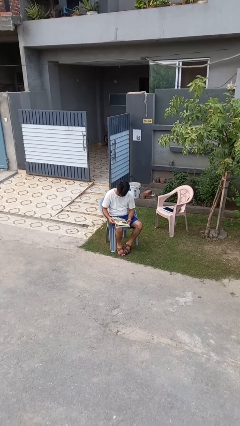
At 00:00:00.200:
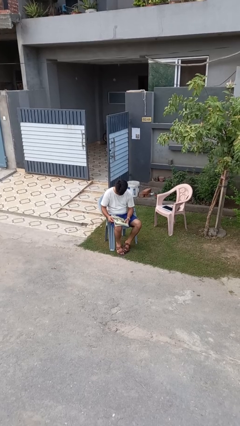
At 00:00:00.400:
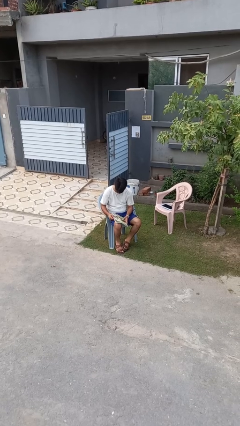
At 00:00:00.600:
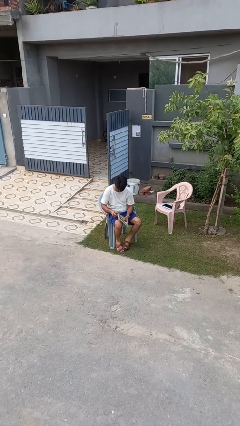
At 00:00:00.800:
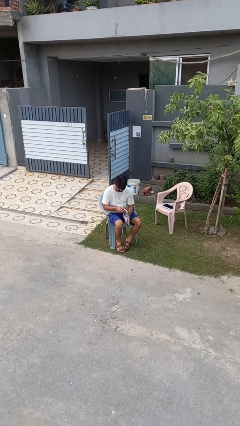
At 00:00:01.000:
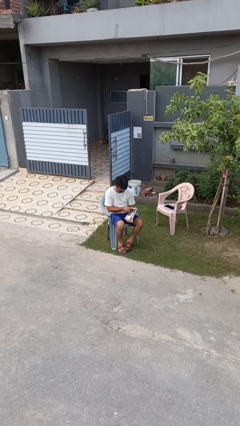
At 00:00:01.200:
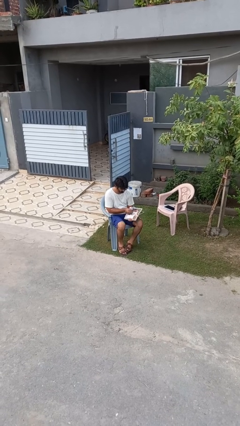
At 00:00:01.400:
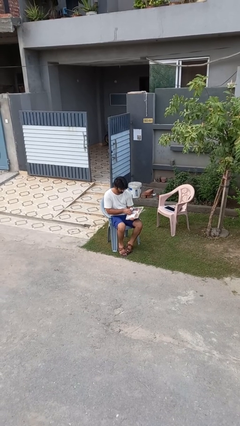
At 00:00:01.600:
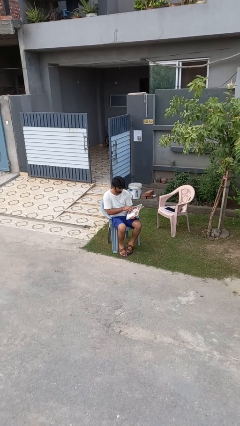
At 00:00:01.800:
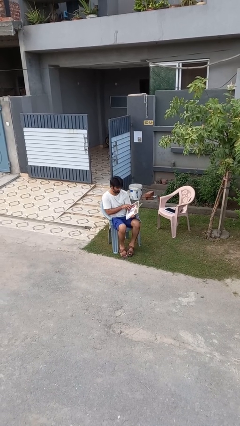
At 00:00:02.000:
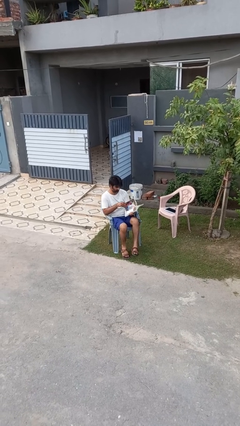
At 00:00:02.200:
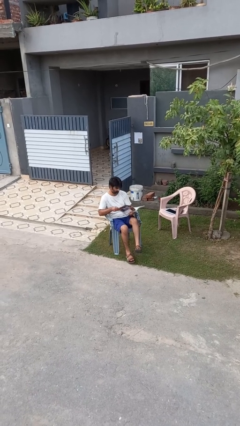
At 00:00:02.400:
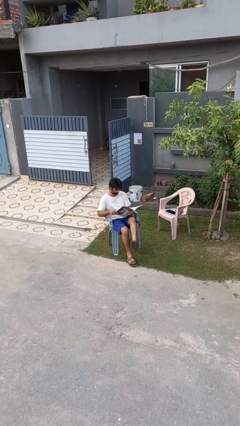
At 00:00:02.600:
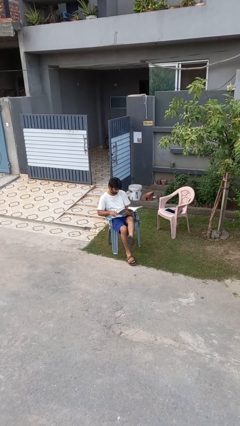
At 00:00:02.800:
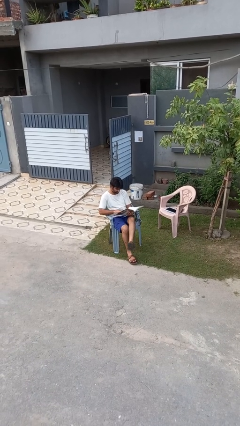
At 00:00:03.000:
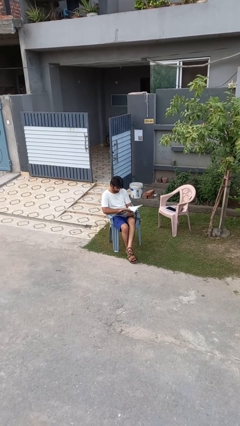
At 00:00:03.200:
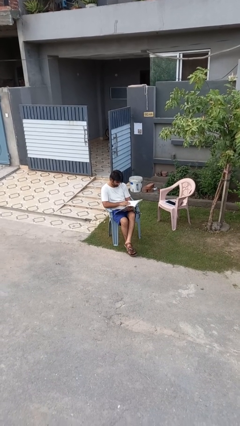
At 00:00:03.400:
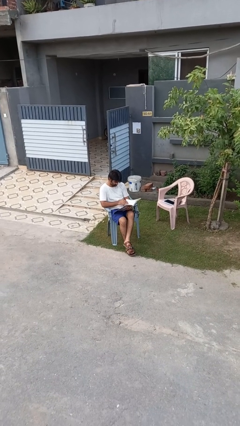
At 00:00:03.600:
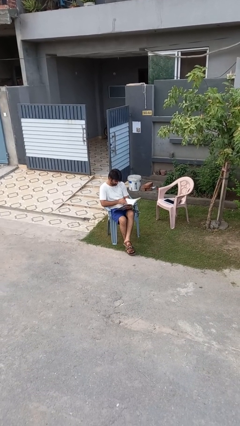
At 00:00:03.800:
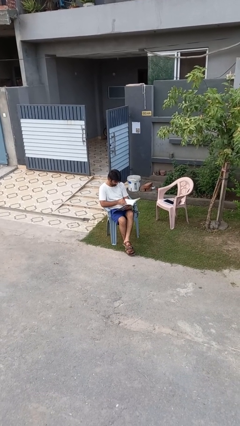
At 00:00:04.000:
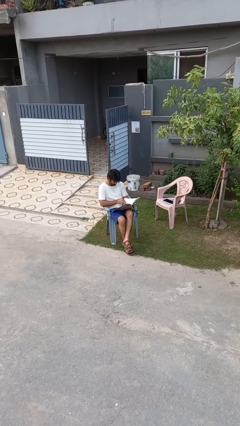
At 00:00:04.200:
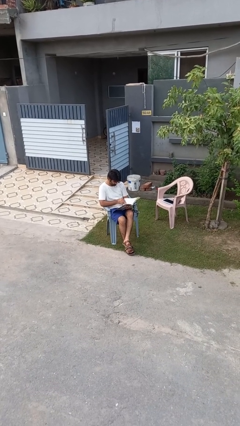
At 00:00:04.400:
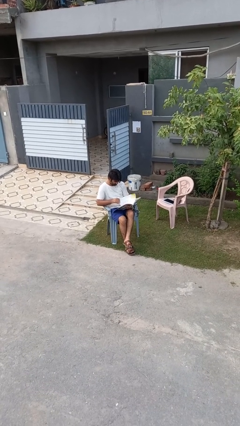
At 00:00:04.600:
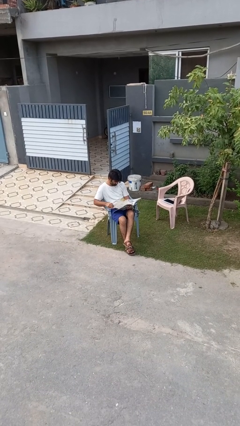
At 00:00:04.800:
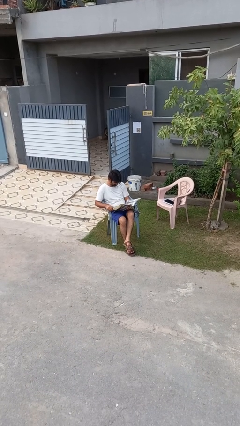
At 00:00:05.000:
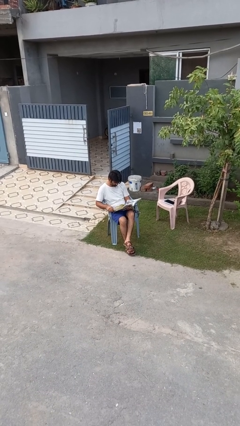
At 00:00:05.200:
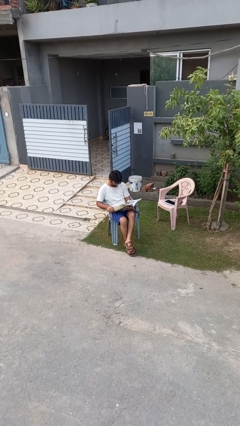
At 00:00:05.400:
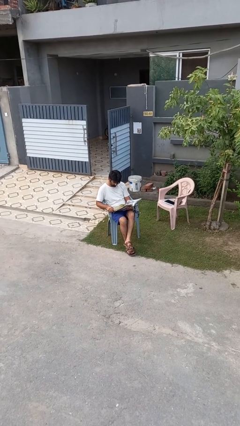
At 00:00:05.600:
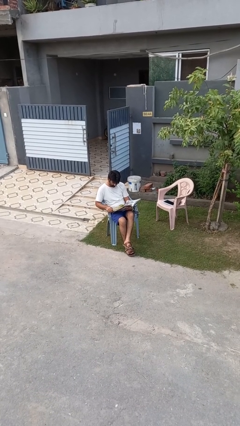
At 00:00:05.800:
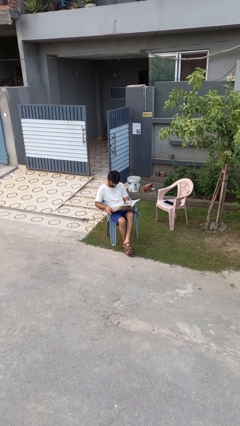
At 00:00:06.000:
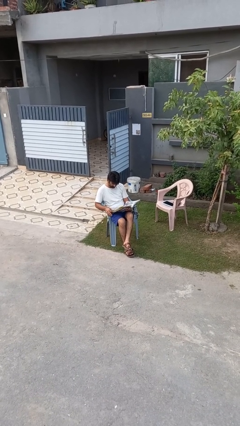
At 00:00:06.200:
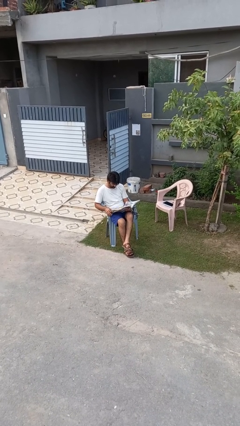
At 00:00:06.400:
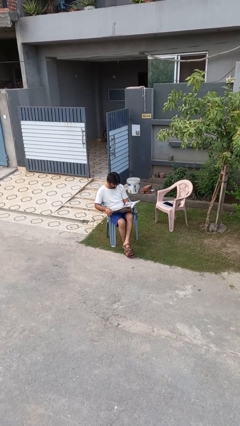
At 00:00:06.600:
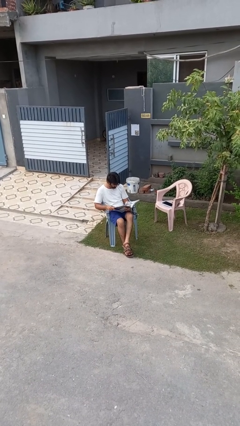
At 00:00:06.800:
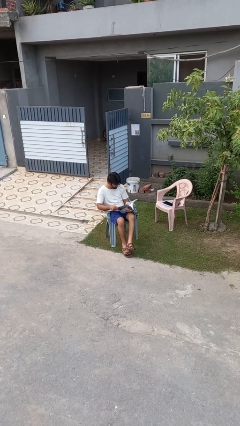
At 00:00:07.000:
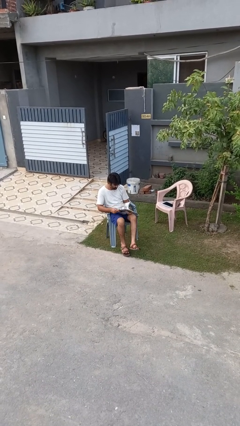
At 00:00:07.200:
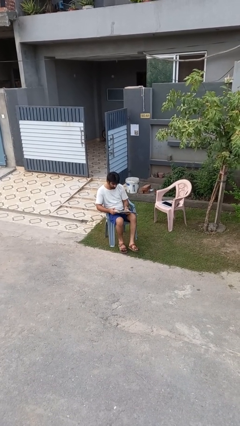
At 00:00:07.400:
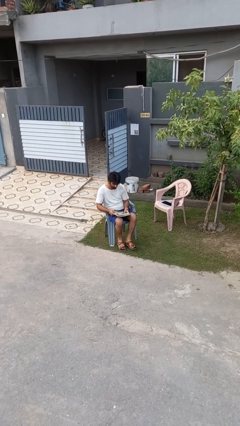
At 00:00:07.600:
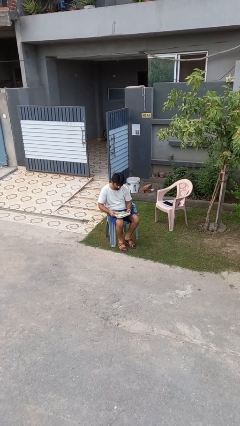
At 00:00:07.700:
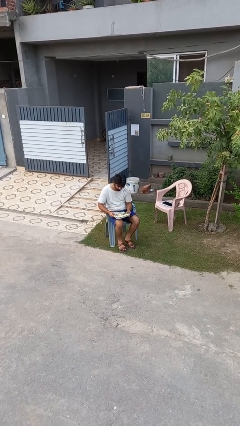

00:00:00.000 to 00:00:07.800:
person reads magazine

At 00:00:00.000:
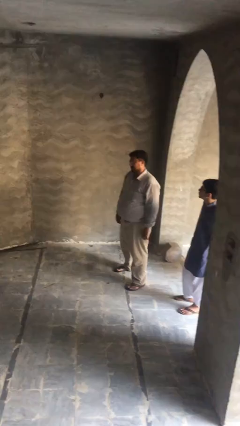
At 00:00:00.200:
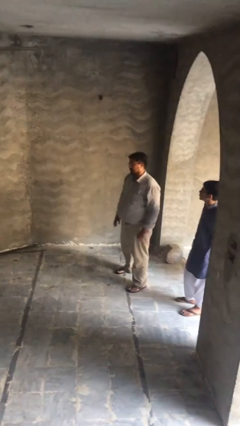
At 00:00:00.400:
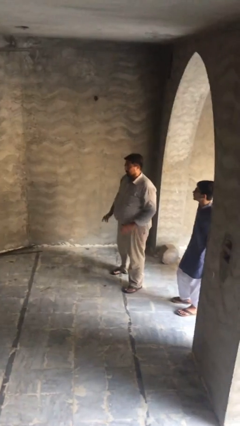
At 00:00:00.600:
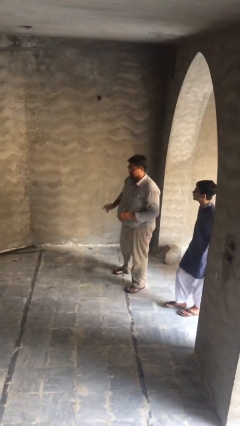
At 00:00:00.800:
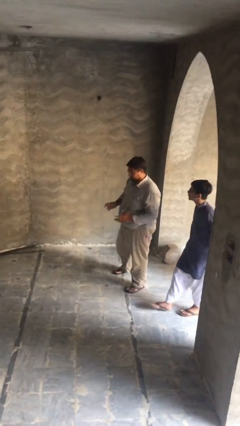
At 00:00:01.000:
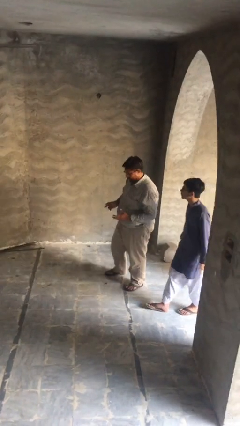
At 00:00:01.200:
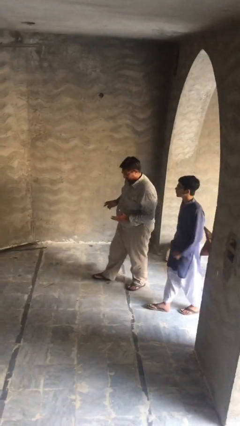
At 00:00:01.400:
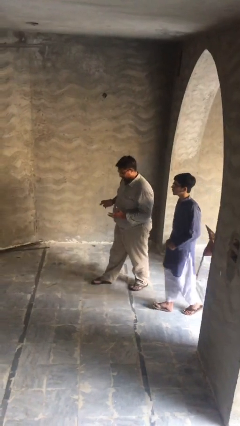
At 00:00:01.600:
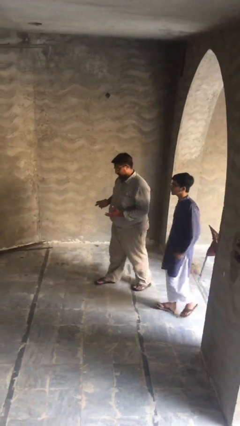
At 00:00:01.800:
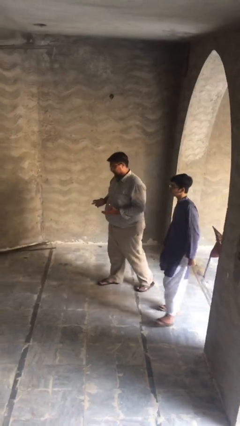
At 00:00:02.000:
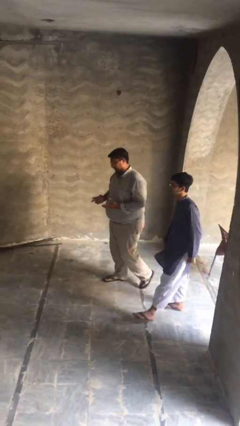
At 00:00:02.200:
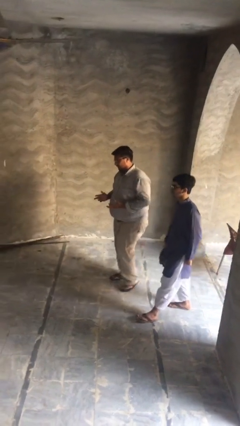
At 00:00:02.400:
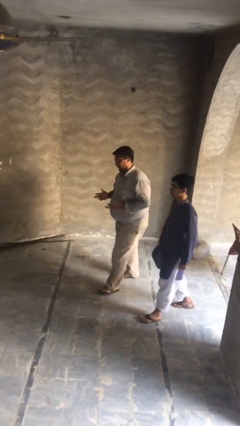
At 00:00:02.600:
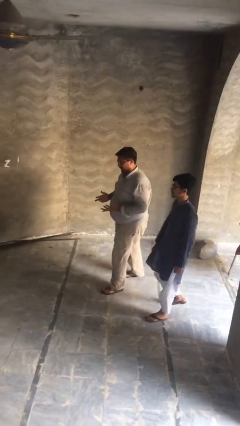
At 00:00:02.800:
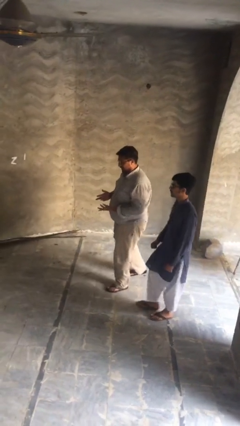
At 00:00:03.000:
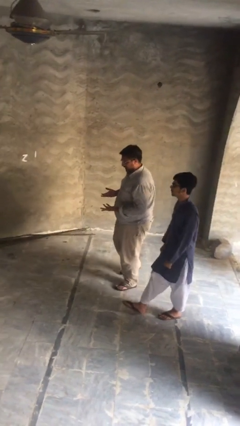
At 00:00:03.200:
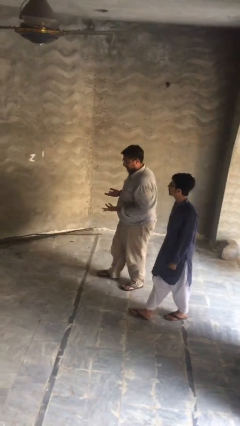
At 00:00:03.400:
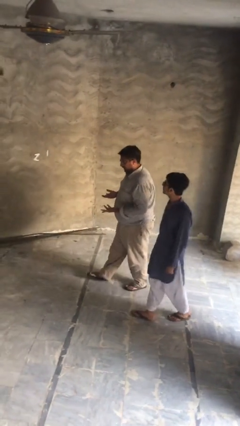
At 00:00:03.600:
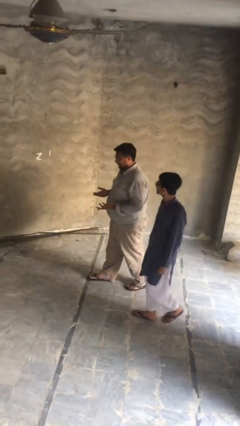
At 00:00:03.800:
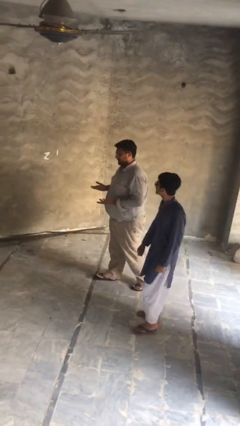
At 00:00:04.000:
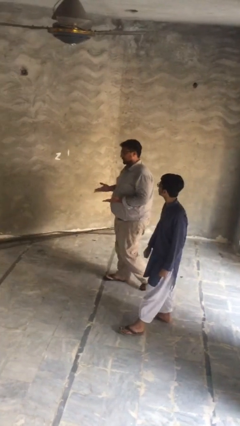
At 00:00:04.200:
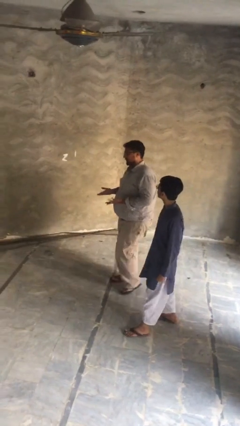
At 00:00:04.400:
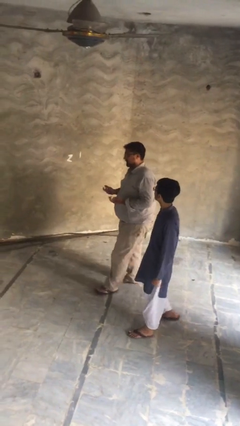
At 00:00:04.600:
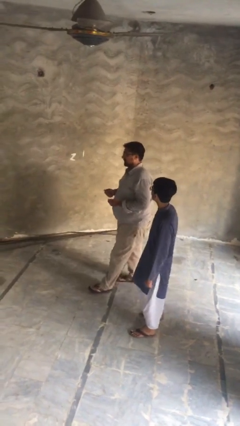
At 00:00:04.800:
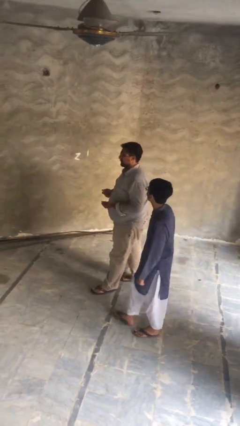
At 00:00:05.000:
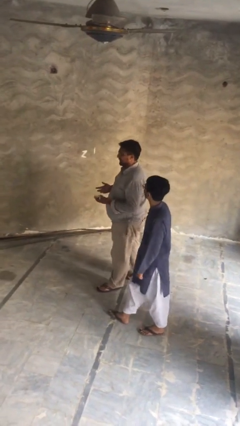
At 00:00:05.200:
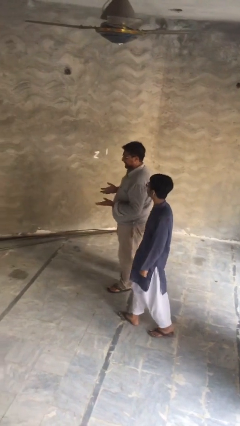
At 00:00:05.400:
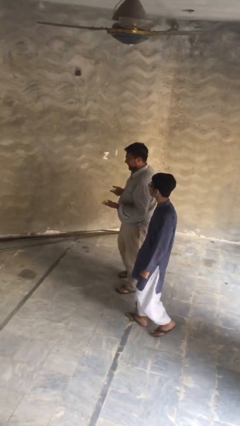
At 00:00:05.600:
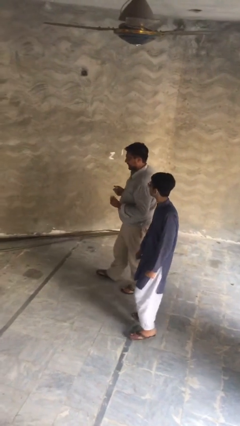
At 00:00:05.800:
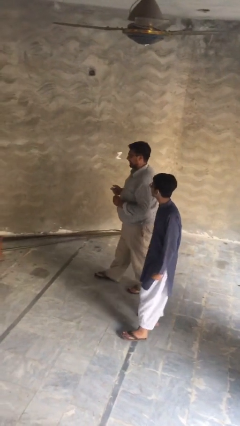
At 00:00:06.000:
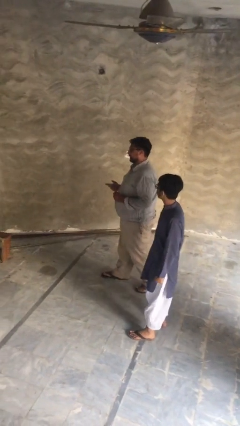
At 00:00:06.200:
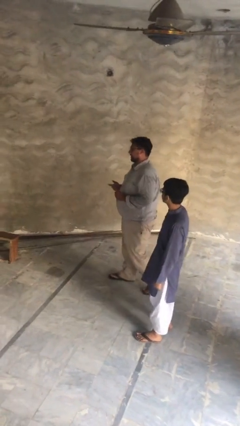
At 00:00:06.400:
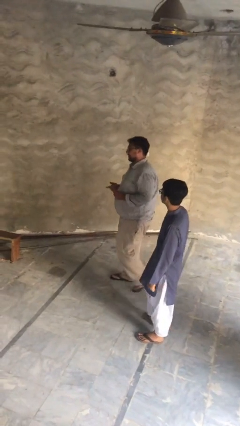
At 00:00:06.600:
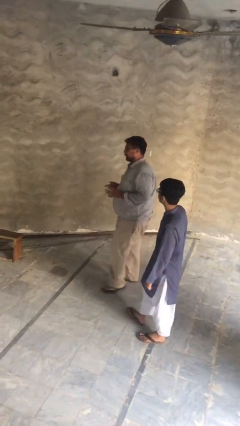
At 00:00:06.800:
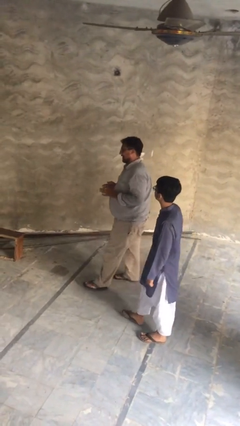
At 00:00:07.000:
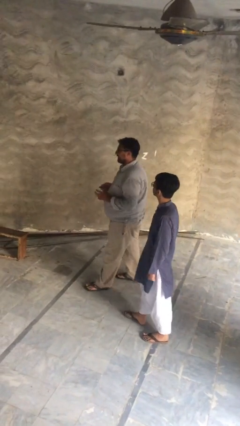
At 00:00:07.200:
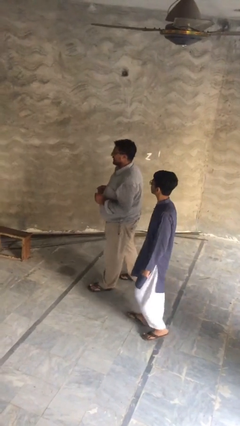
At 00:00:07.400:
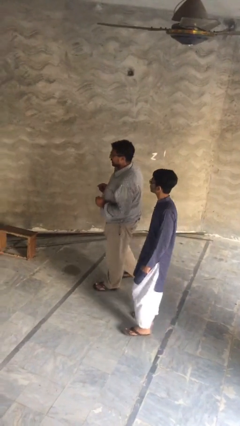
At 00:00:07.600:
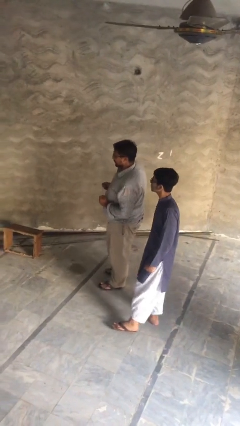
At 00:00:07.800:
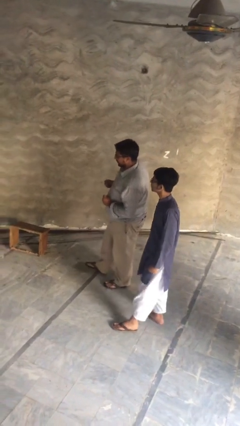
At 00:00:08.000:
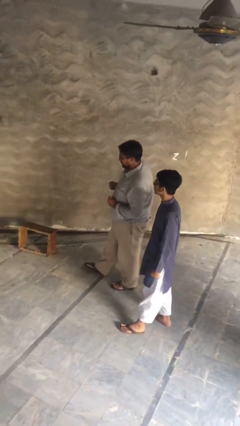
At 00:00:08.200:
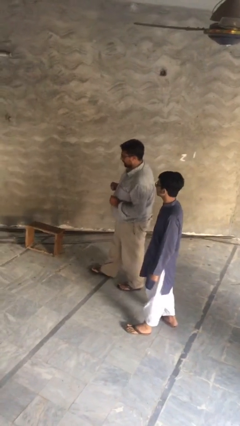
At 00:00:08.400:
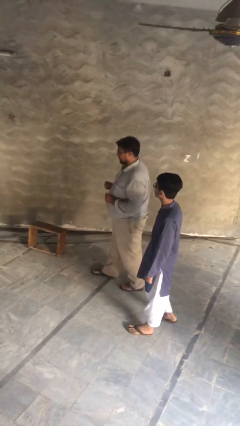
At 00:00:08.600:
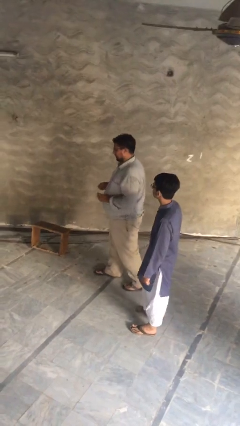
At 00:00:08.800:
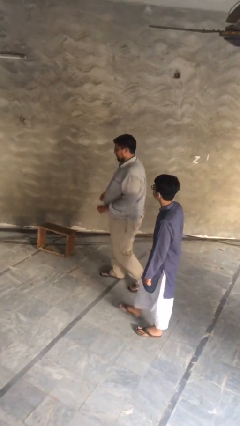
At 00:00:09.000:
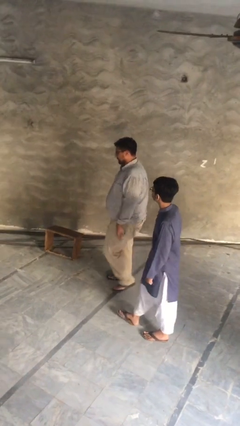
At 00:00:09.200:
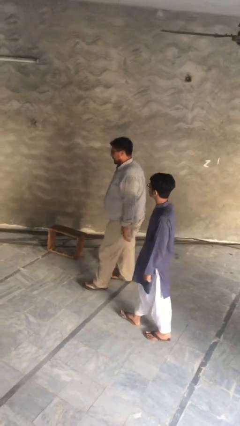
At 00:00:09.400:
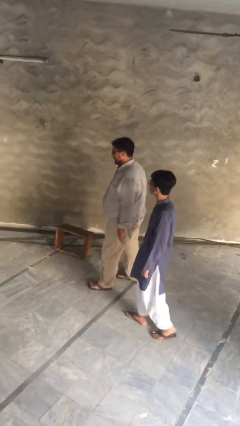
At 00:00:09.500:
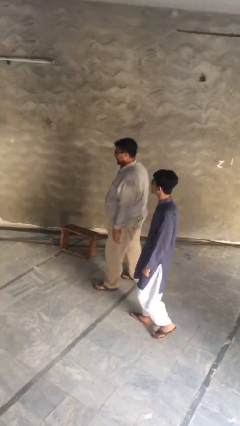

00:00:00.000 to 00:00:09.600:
person talks to person

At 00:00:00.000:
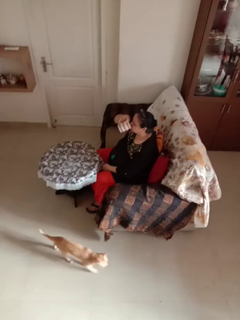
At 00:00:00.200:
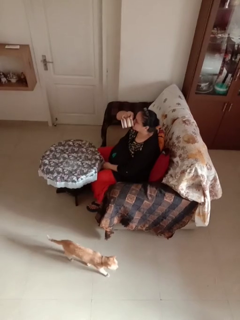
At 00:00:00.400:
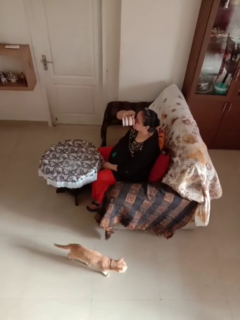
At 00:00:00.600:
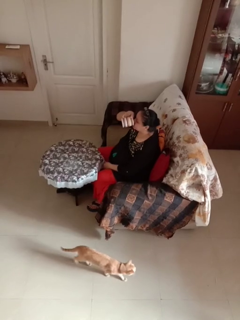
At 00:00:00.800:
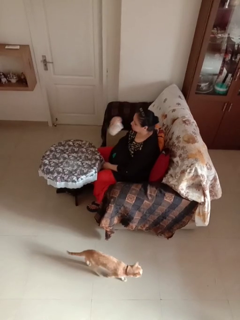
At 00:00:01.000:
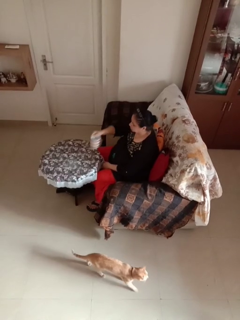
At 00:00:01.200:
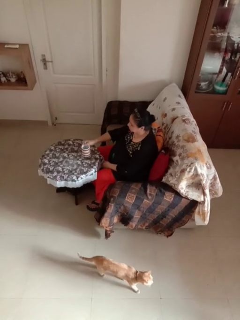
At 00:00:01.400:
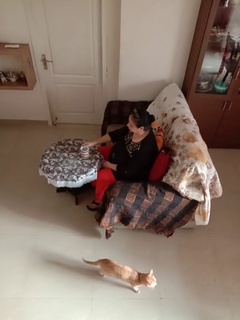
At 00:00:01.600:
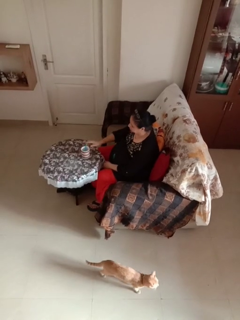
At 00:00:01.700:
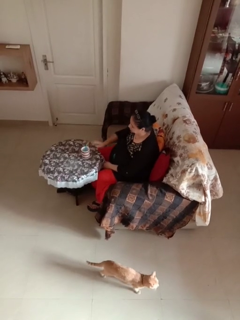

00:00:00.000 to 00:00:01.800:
person drinks from mug
